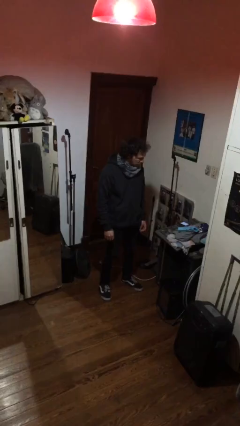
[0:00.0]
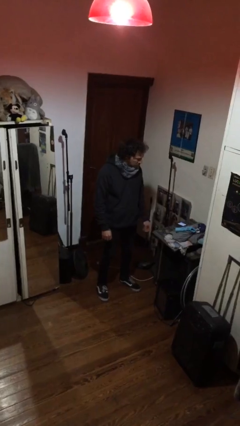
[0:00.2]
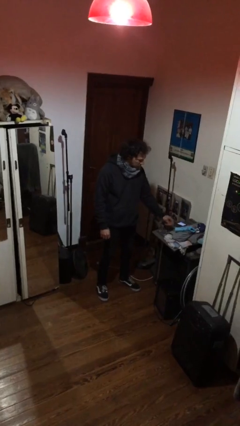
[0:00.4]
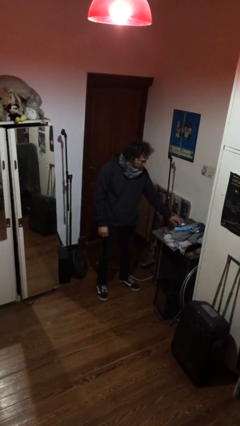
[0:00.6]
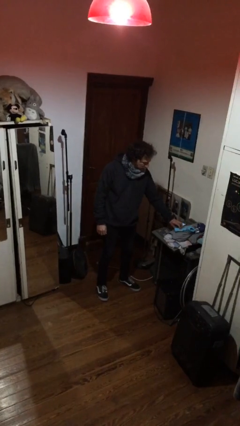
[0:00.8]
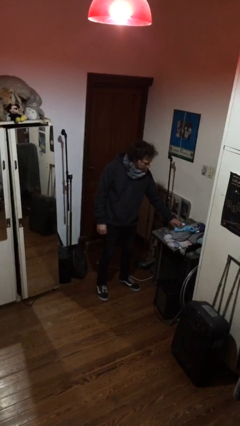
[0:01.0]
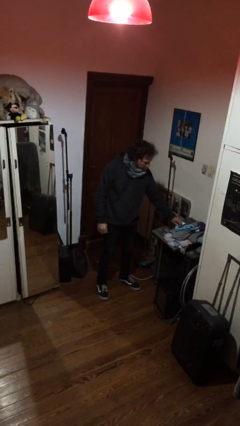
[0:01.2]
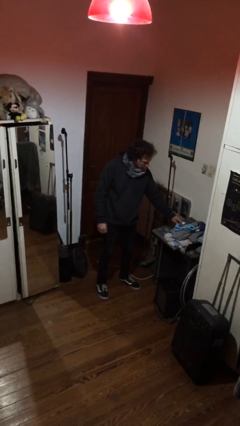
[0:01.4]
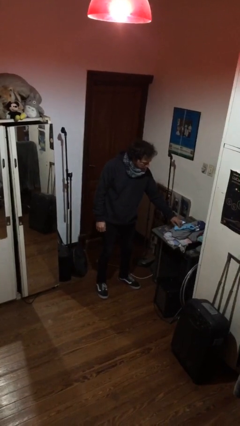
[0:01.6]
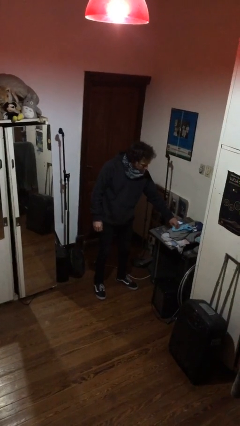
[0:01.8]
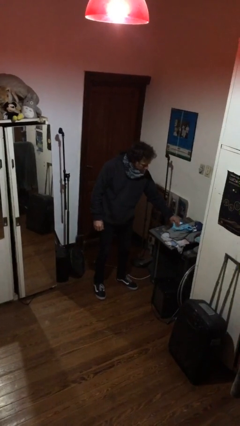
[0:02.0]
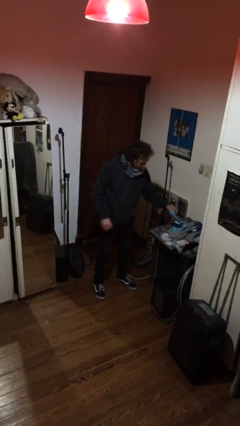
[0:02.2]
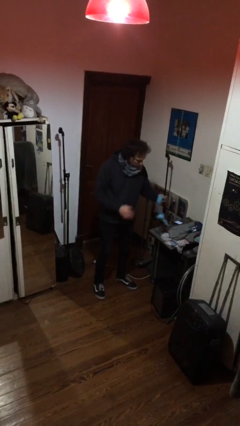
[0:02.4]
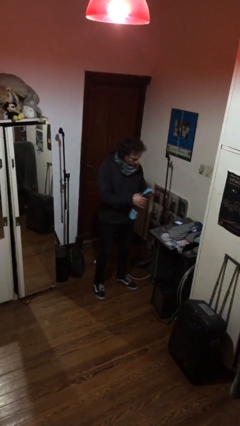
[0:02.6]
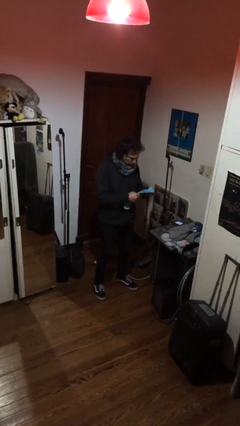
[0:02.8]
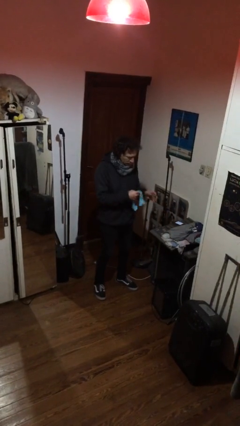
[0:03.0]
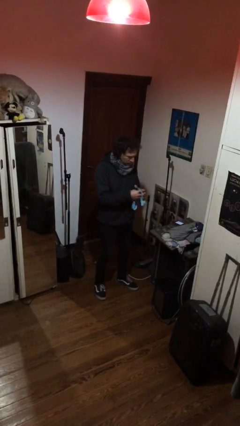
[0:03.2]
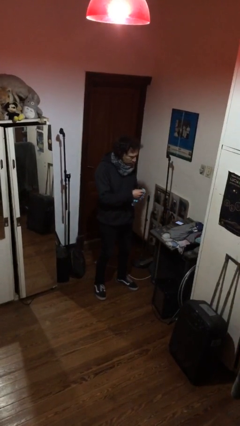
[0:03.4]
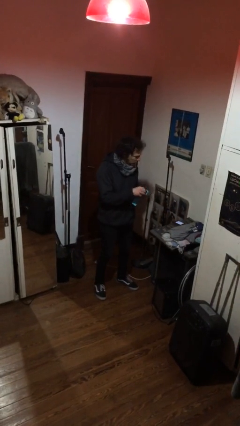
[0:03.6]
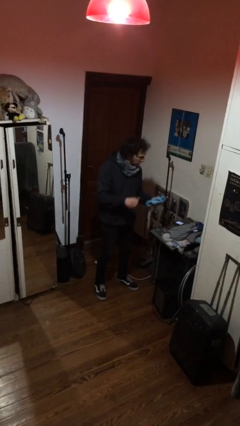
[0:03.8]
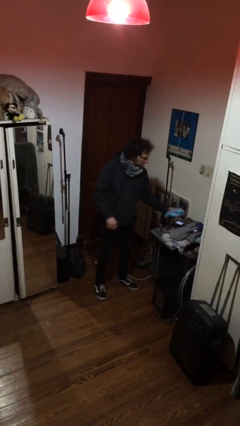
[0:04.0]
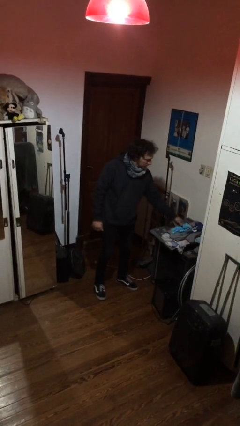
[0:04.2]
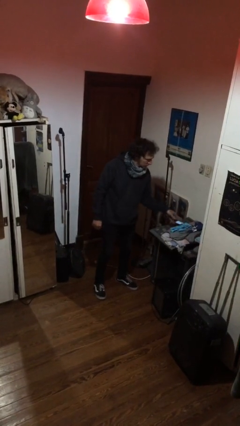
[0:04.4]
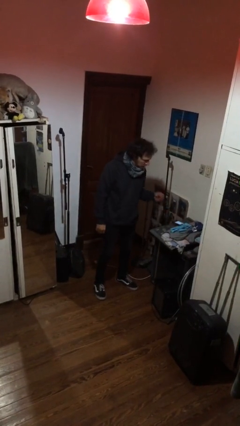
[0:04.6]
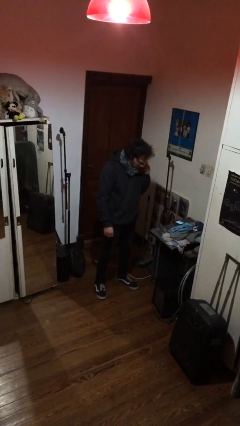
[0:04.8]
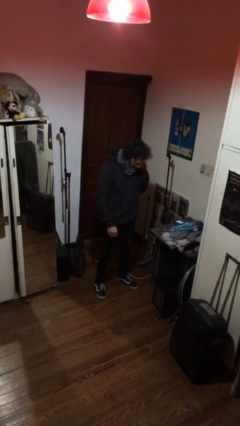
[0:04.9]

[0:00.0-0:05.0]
person folds socks

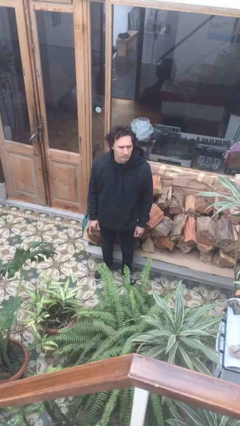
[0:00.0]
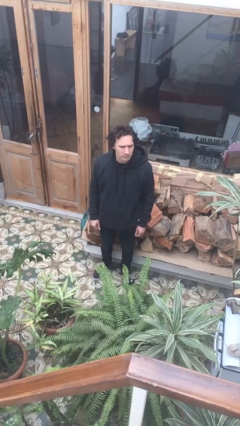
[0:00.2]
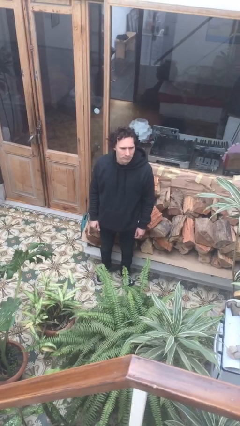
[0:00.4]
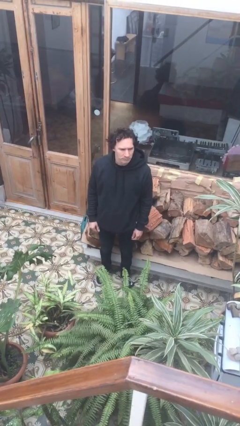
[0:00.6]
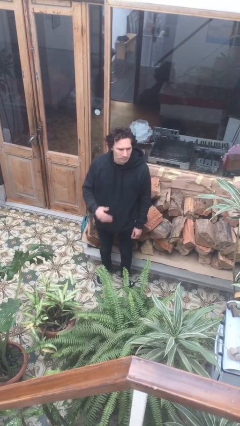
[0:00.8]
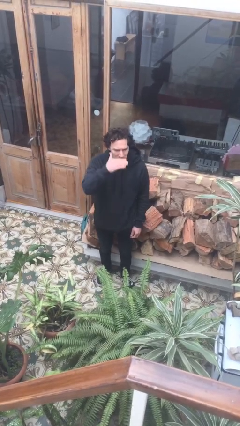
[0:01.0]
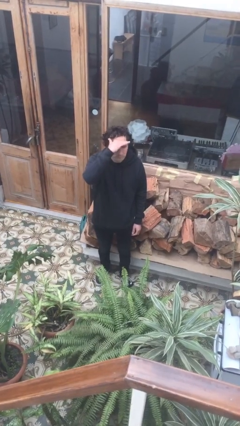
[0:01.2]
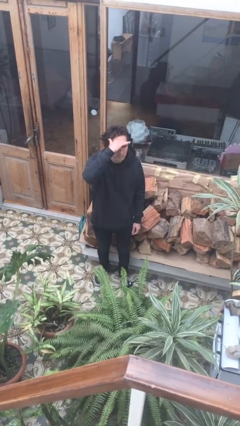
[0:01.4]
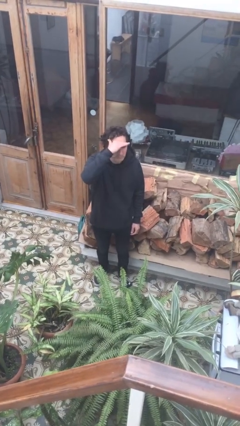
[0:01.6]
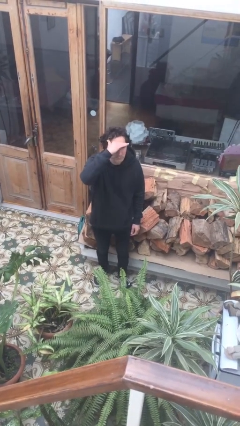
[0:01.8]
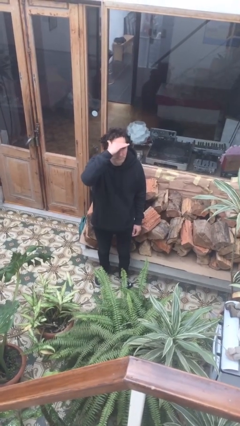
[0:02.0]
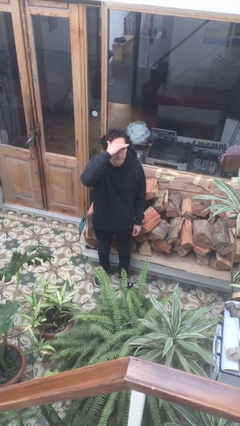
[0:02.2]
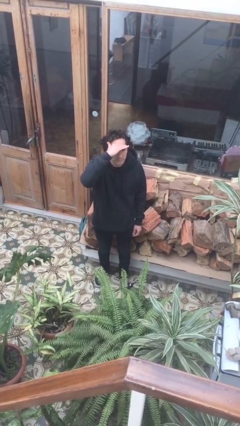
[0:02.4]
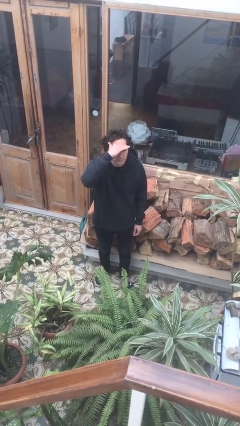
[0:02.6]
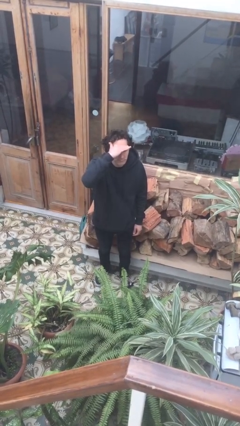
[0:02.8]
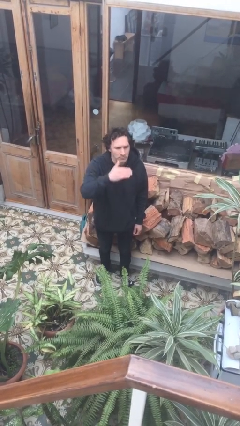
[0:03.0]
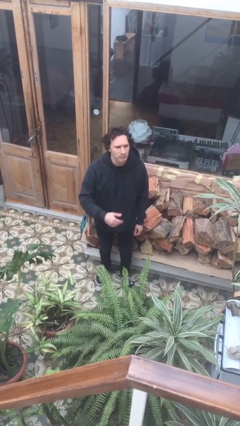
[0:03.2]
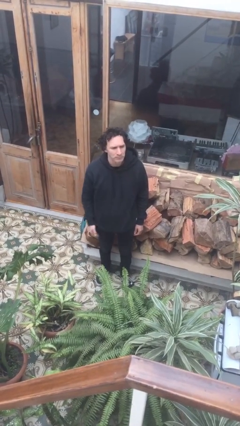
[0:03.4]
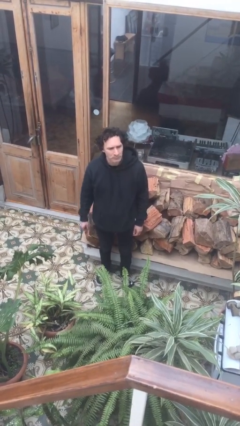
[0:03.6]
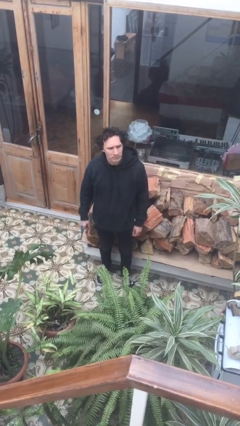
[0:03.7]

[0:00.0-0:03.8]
person shades eyes

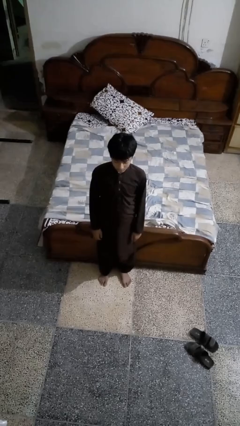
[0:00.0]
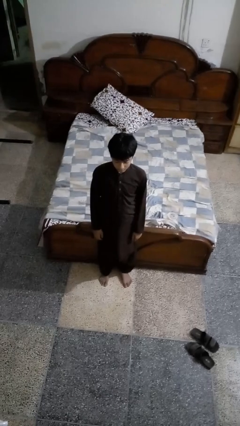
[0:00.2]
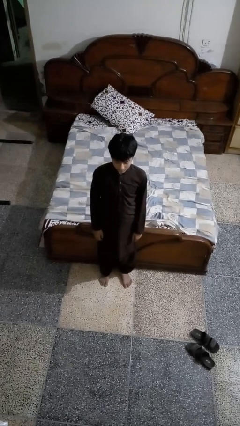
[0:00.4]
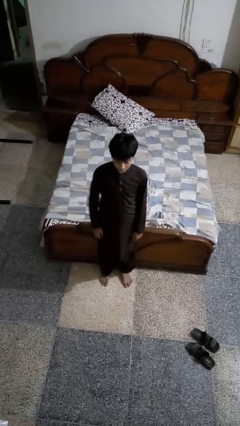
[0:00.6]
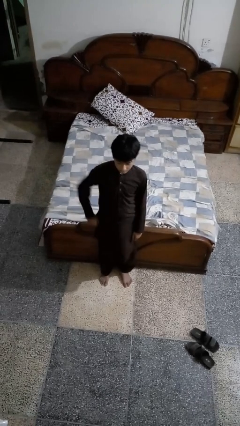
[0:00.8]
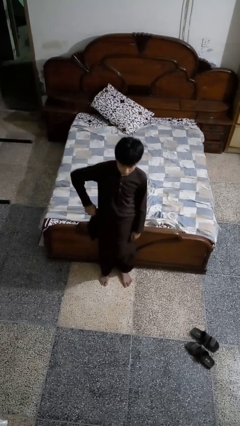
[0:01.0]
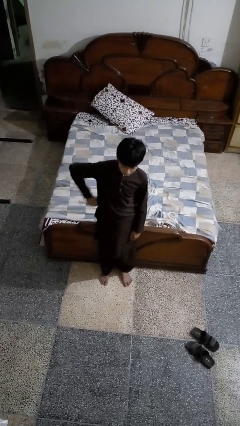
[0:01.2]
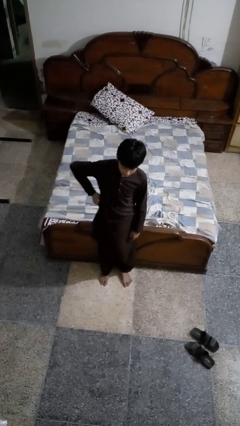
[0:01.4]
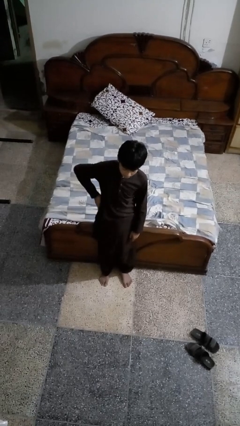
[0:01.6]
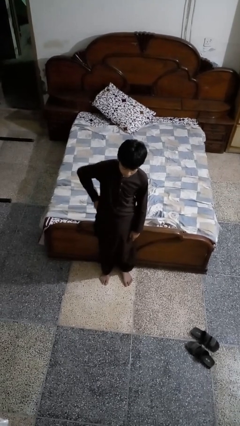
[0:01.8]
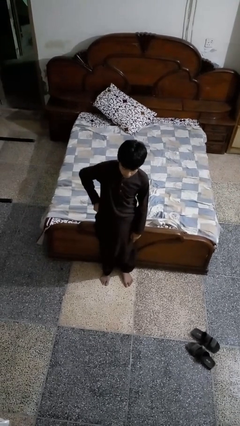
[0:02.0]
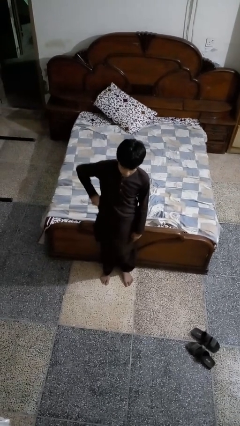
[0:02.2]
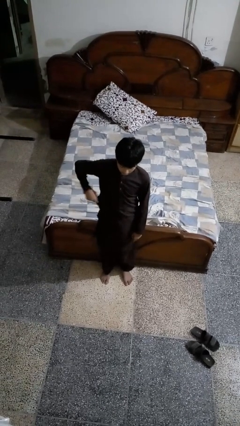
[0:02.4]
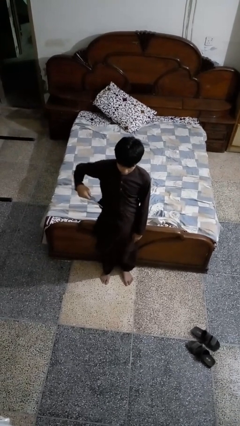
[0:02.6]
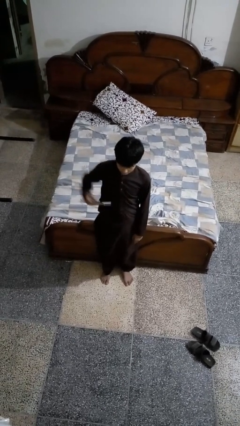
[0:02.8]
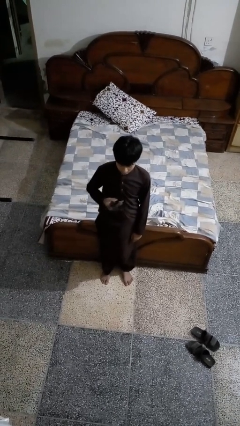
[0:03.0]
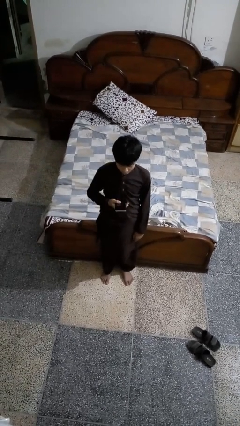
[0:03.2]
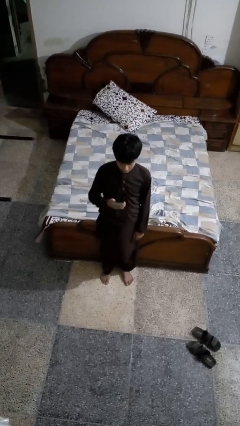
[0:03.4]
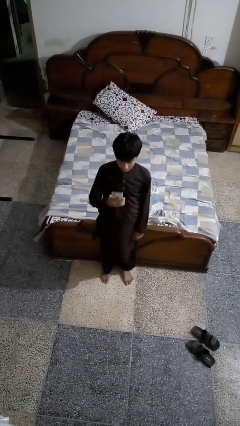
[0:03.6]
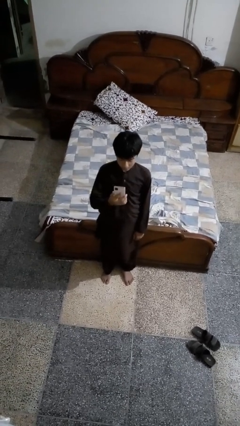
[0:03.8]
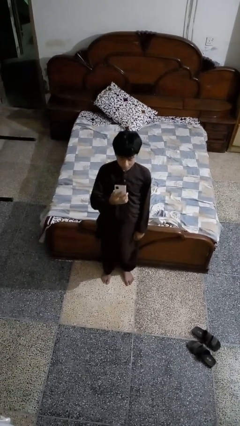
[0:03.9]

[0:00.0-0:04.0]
person takes phone from pocket

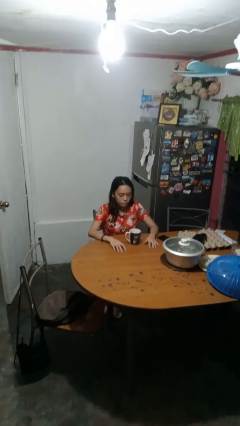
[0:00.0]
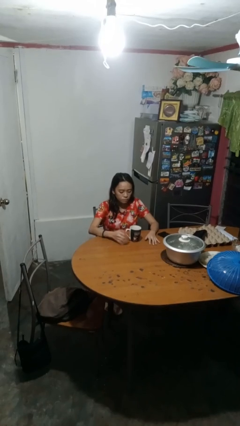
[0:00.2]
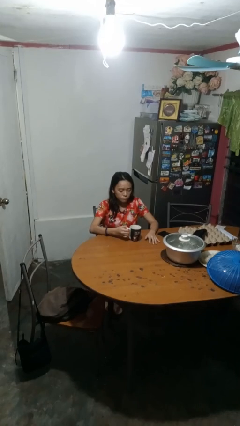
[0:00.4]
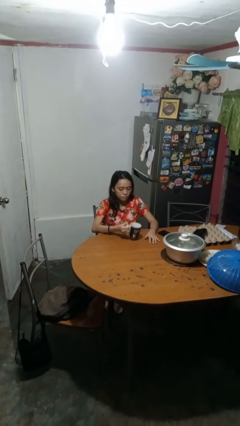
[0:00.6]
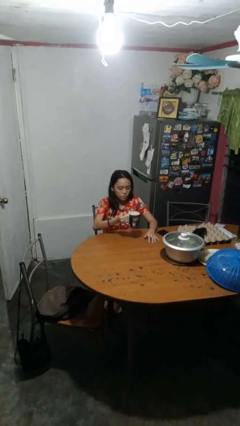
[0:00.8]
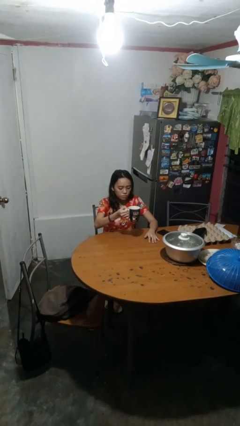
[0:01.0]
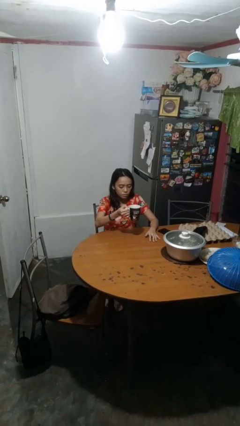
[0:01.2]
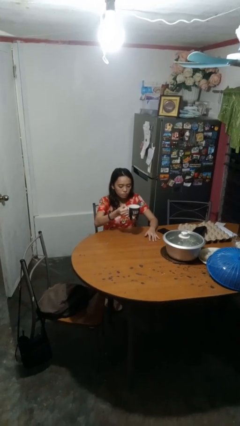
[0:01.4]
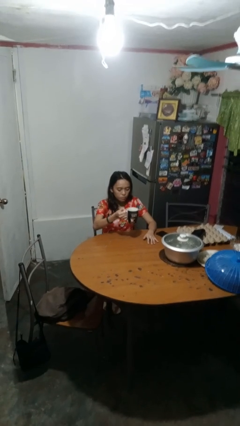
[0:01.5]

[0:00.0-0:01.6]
person picks up object from table

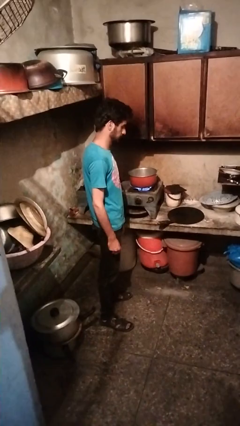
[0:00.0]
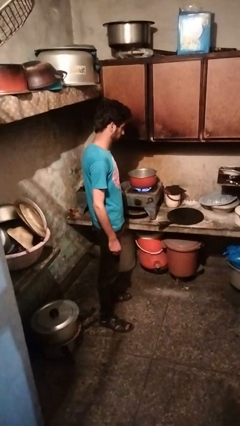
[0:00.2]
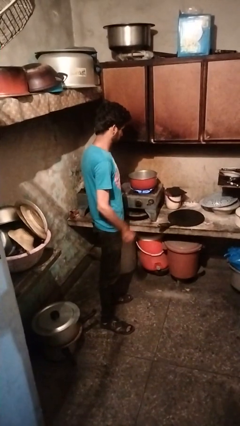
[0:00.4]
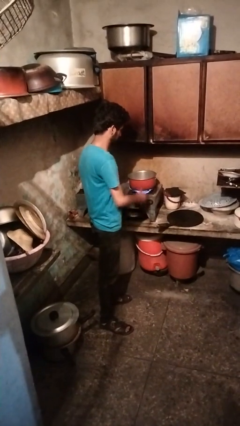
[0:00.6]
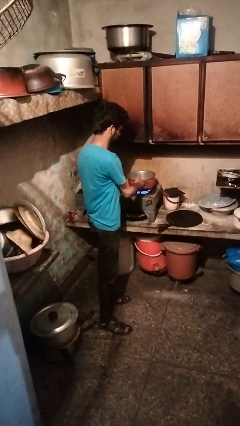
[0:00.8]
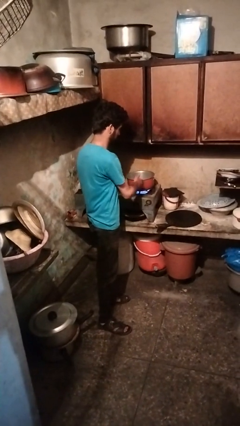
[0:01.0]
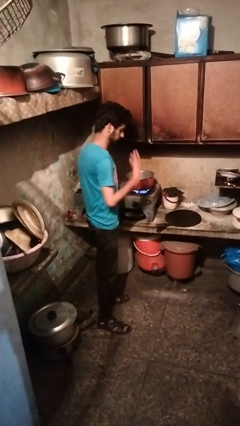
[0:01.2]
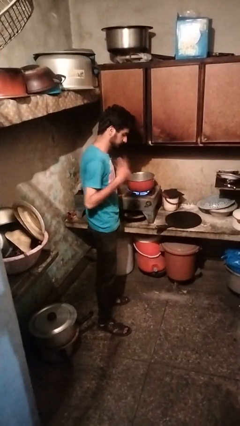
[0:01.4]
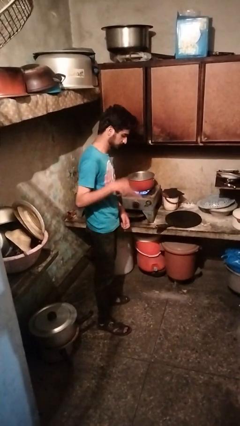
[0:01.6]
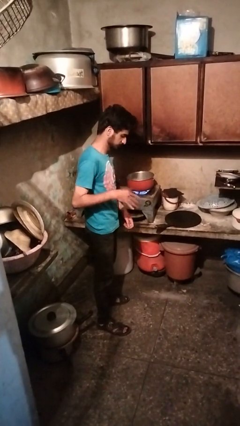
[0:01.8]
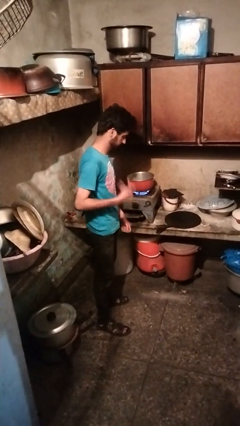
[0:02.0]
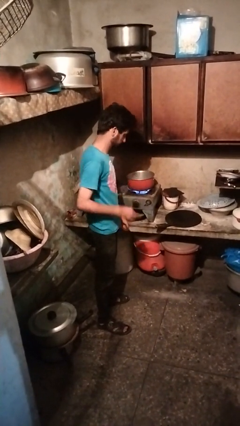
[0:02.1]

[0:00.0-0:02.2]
person burns hand

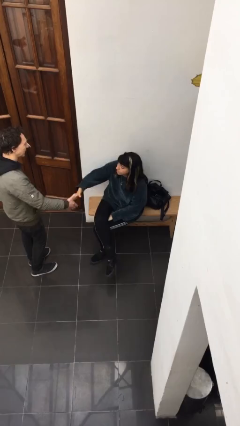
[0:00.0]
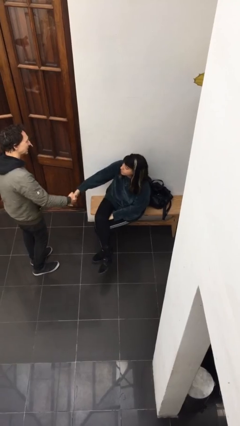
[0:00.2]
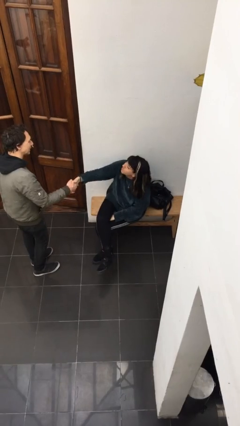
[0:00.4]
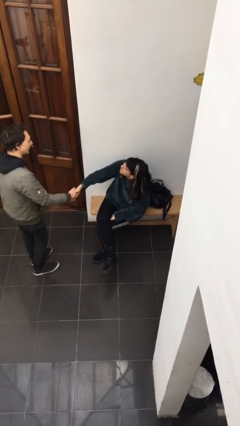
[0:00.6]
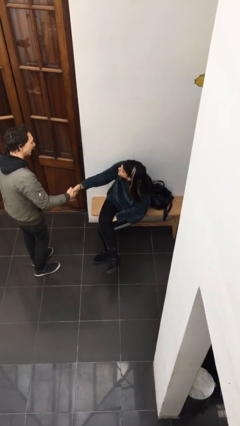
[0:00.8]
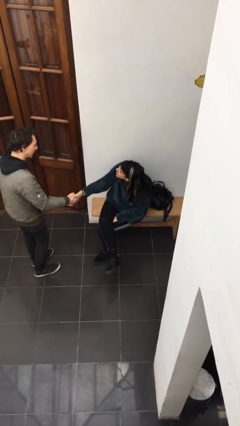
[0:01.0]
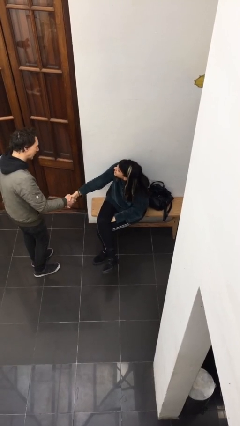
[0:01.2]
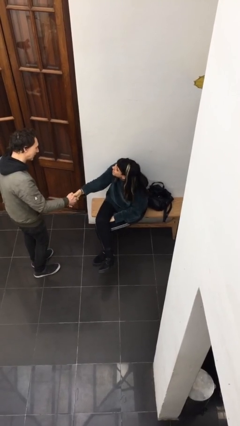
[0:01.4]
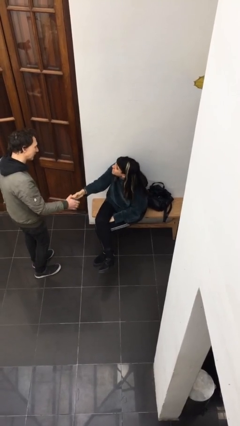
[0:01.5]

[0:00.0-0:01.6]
person shakes hand
